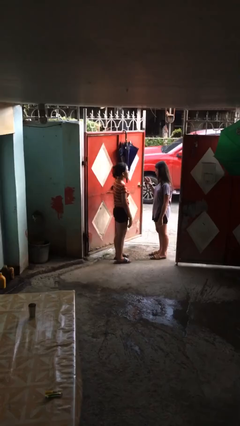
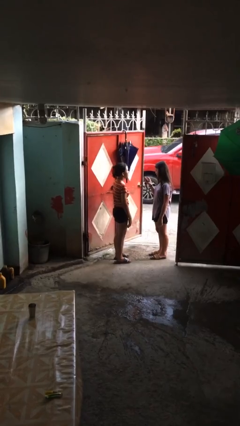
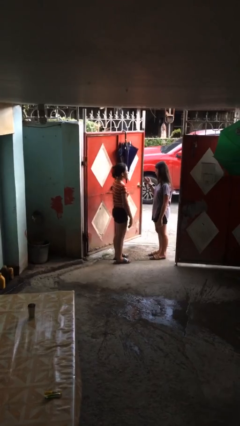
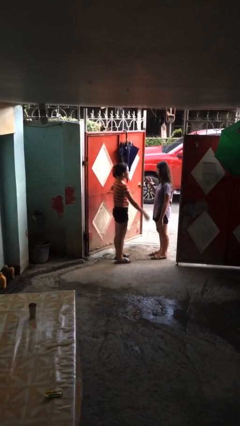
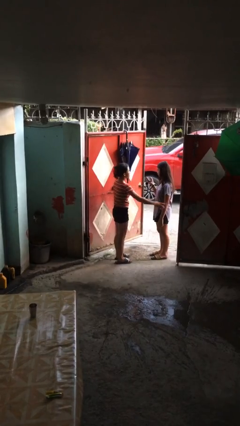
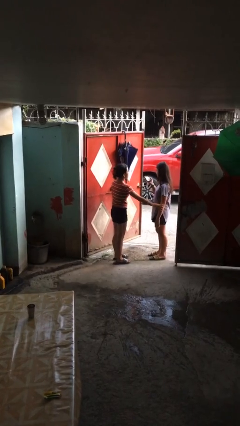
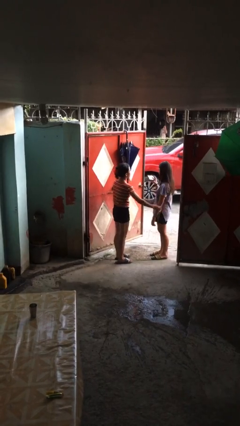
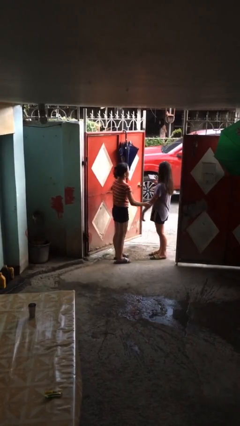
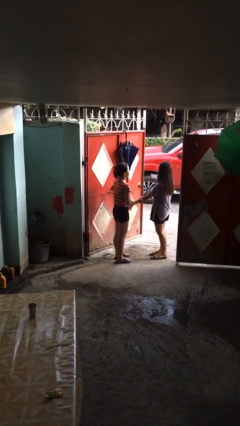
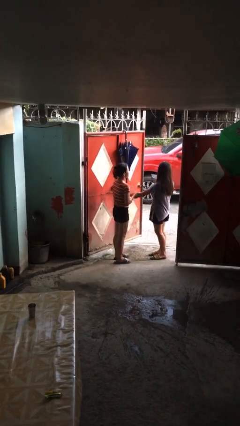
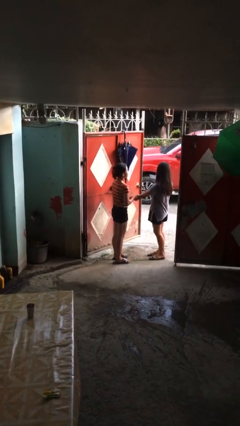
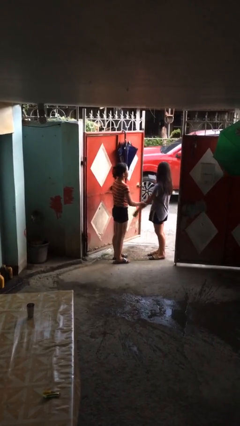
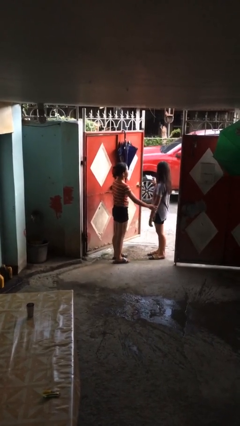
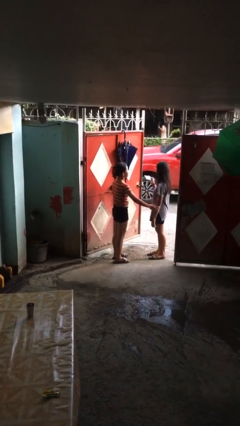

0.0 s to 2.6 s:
person grabs person by forearm

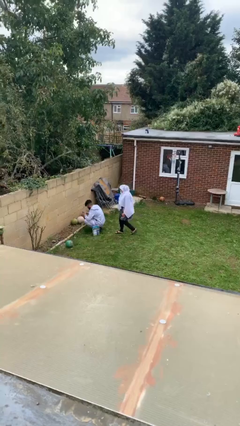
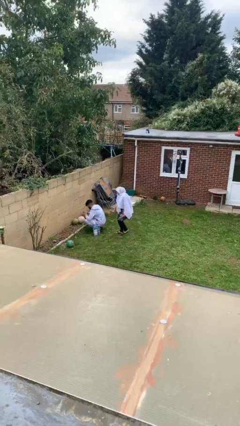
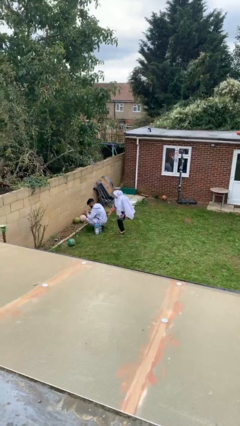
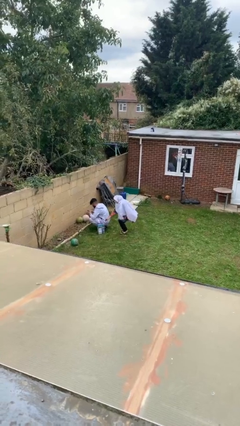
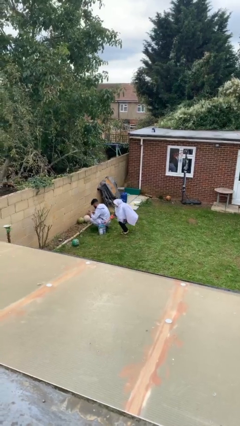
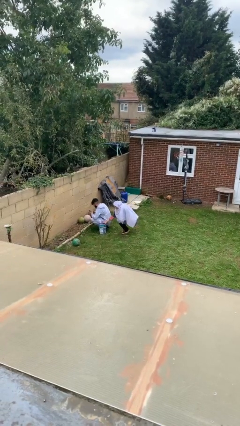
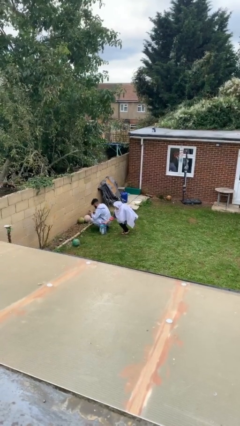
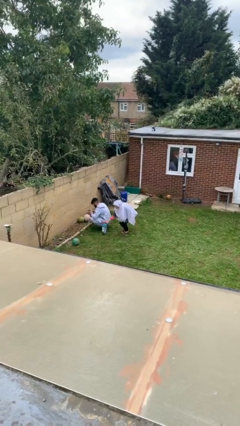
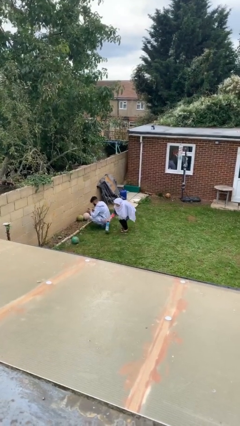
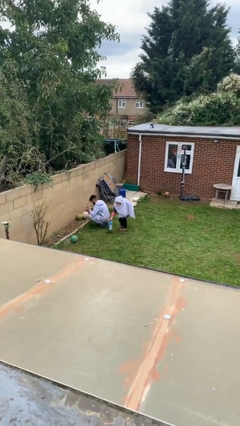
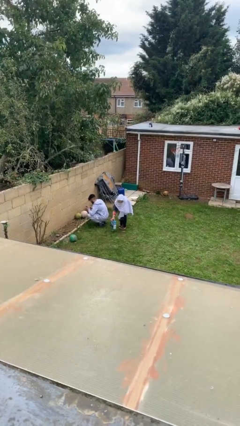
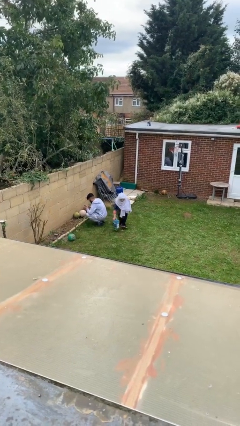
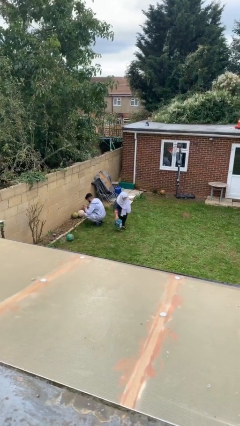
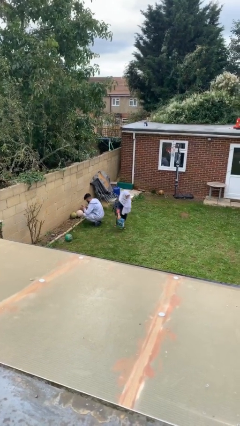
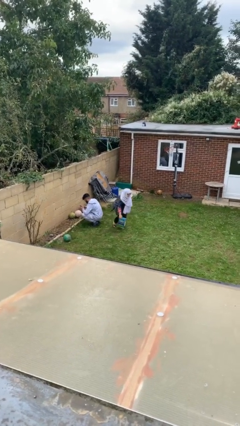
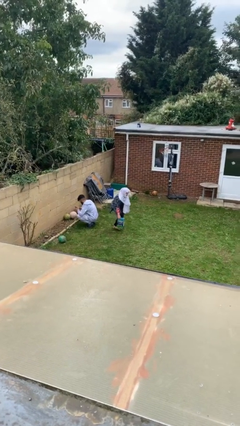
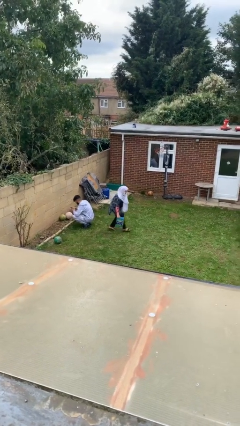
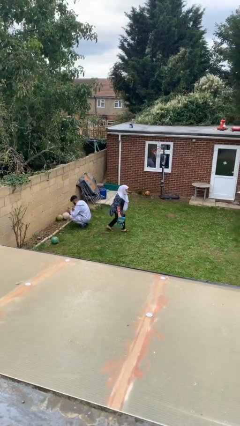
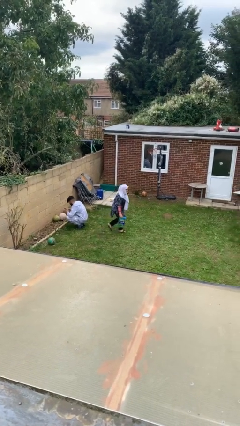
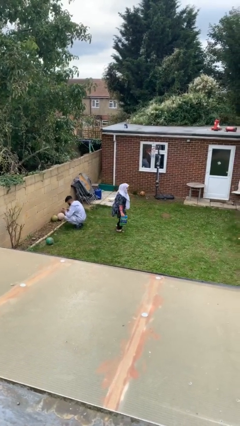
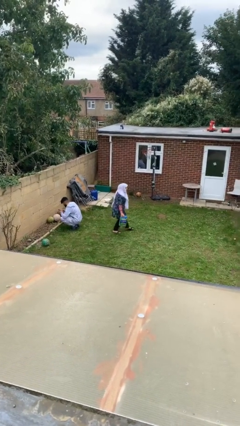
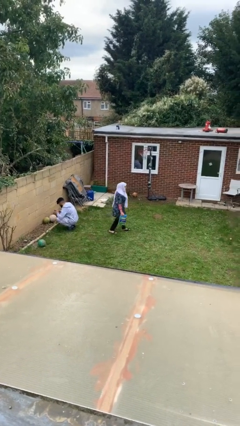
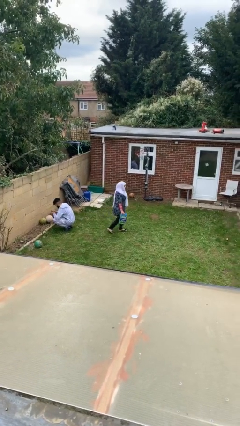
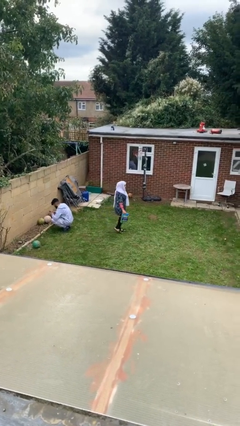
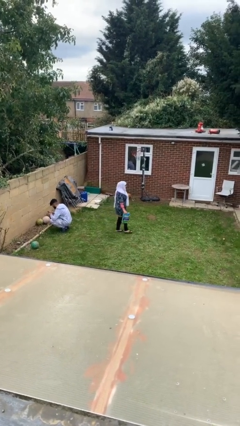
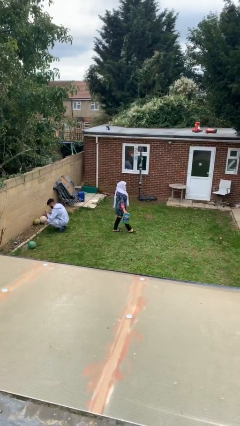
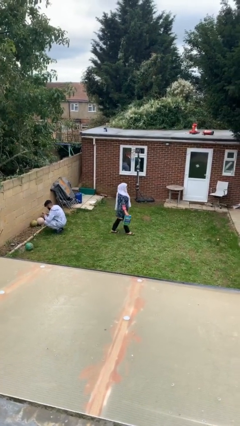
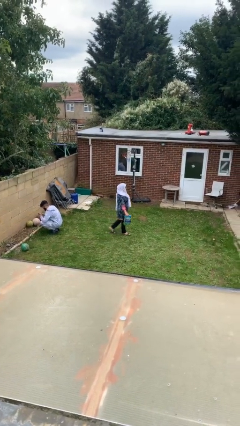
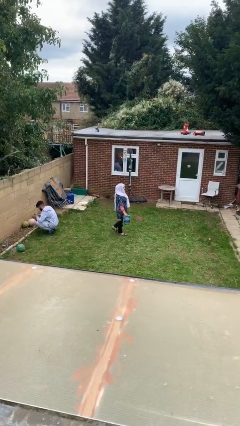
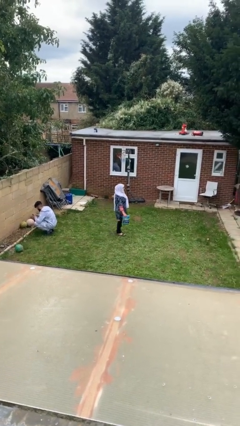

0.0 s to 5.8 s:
person steals object from person

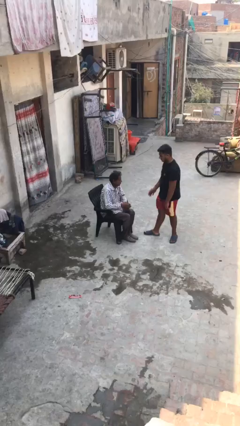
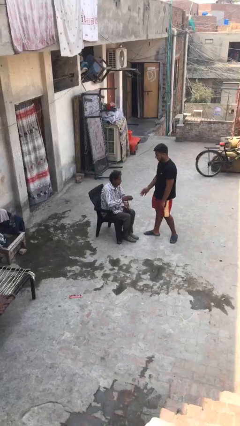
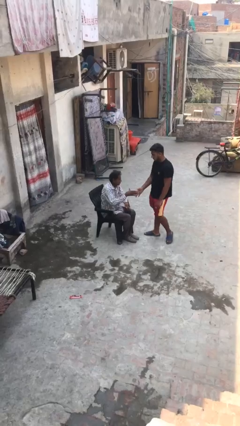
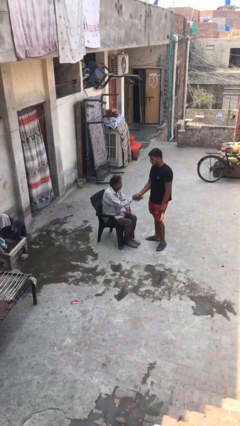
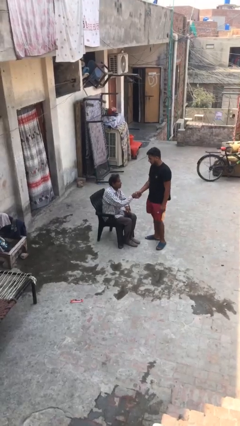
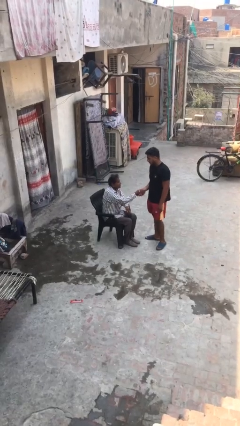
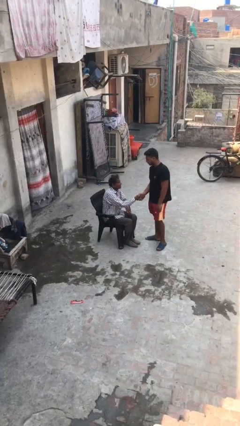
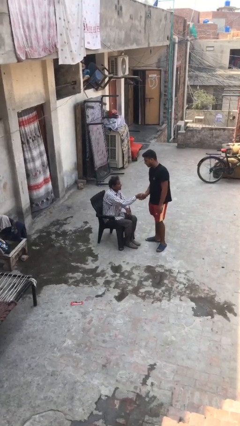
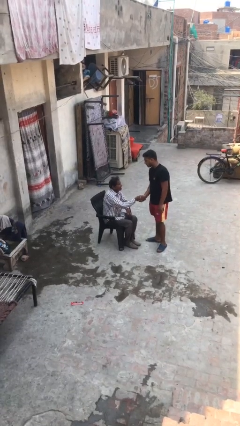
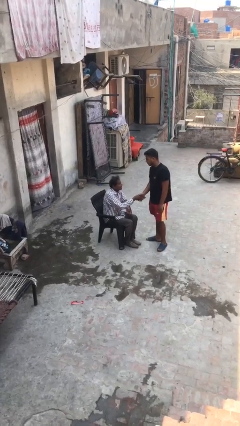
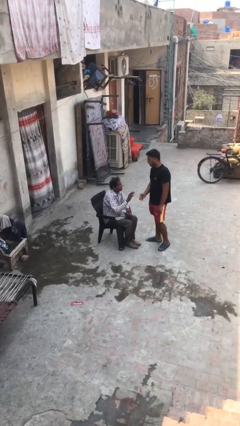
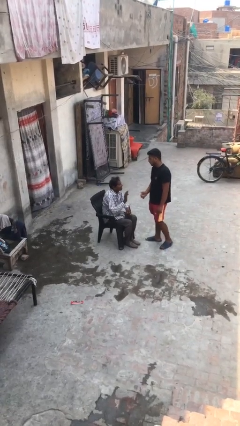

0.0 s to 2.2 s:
person shakes hand

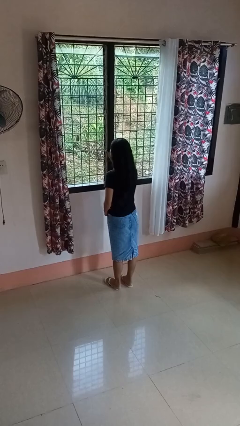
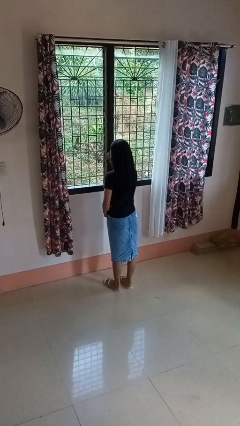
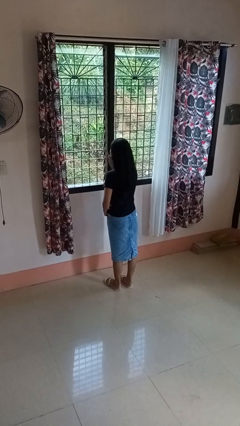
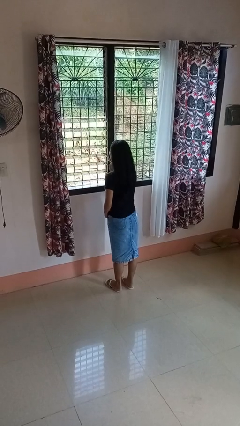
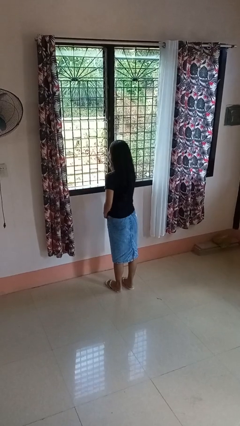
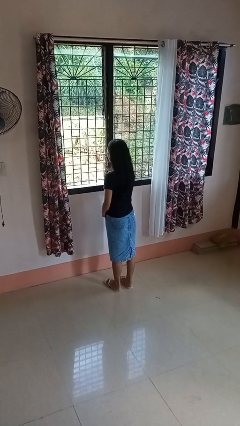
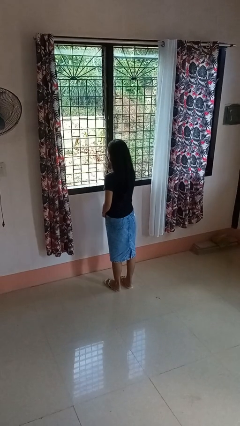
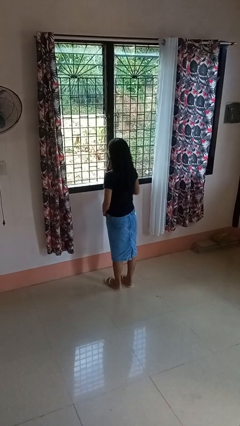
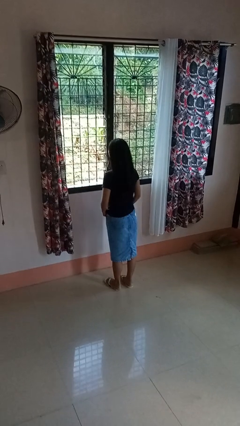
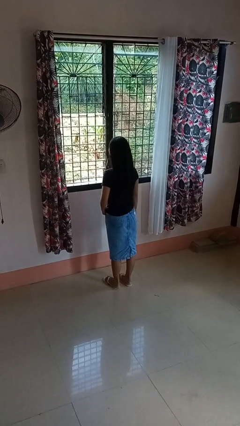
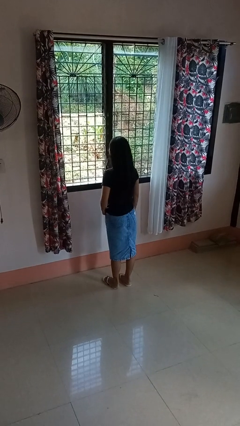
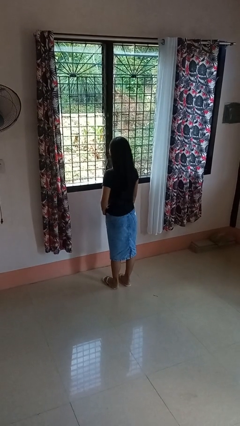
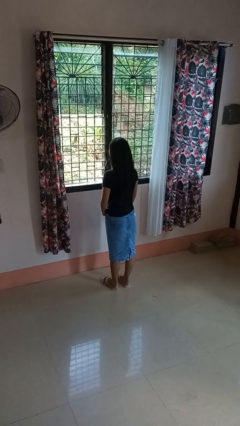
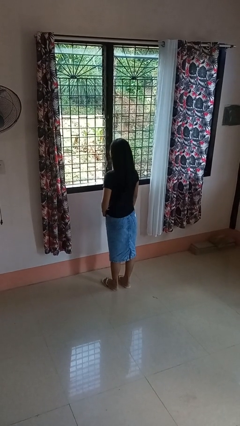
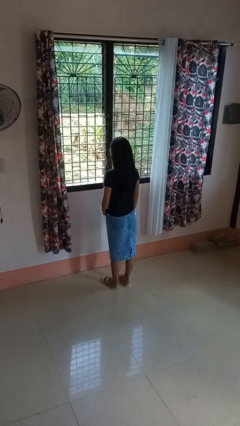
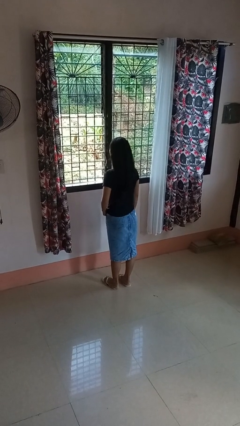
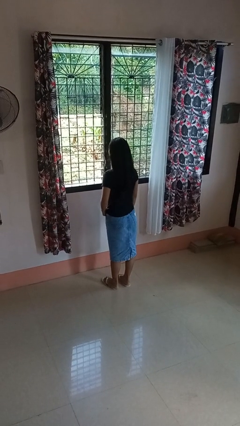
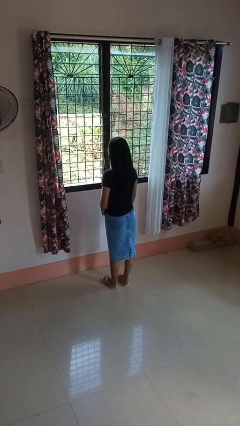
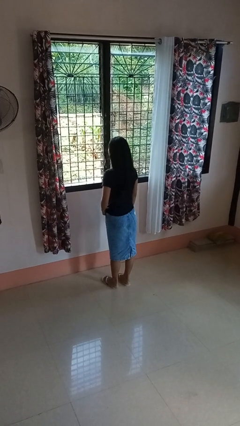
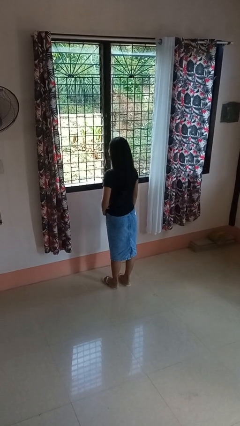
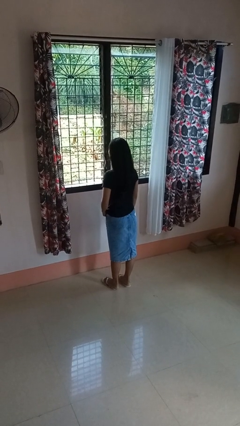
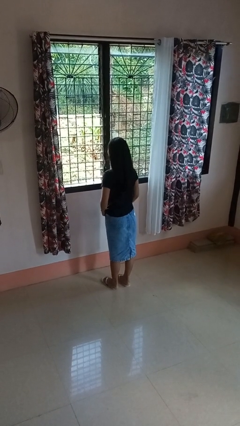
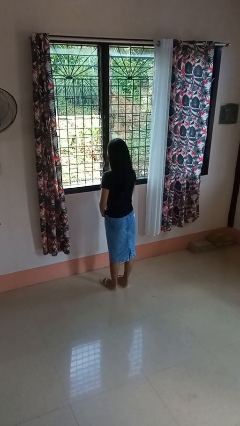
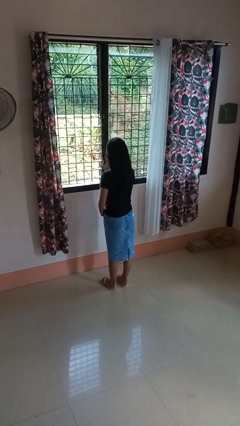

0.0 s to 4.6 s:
person opens home window

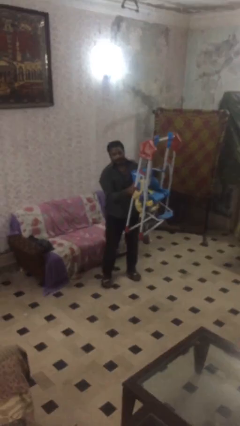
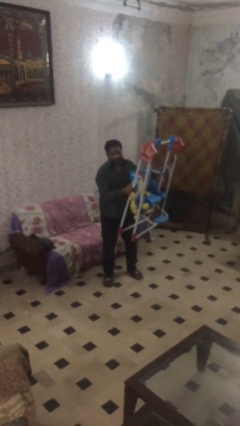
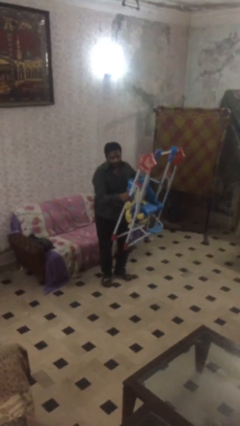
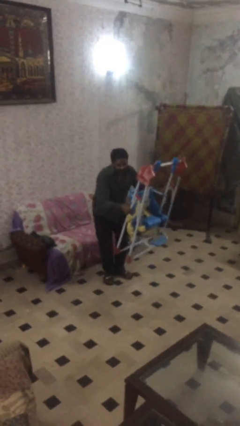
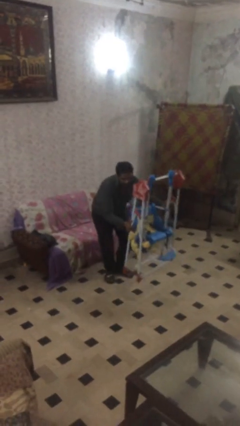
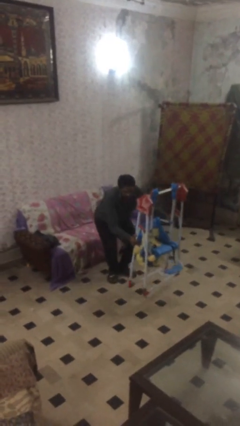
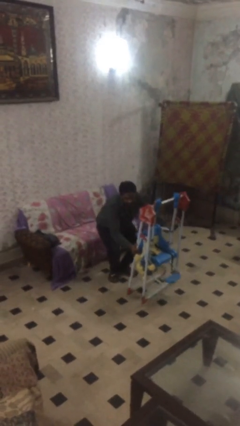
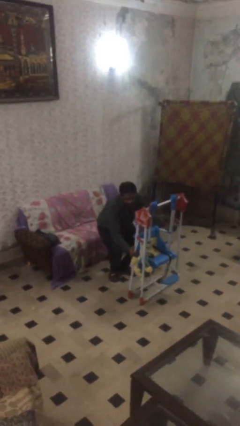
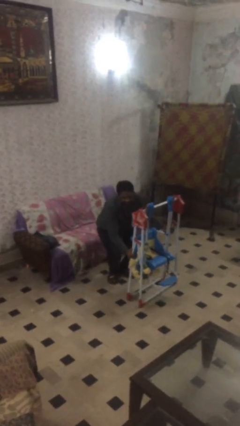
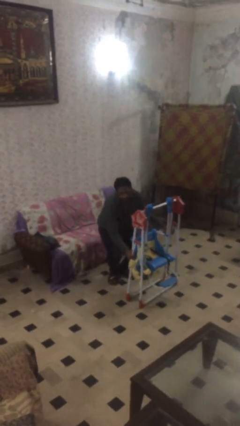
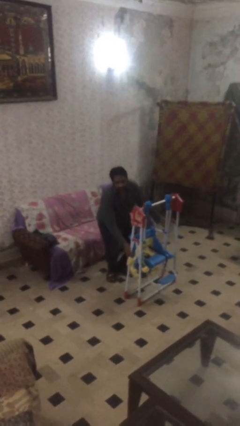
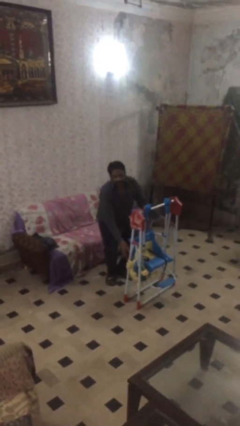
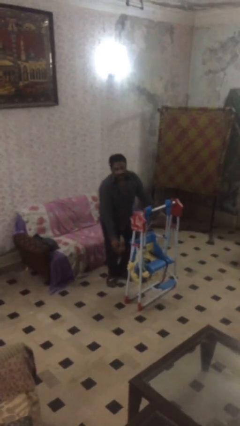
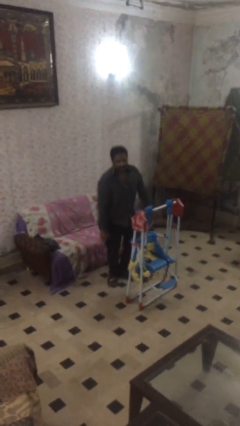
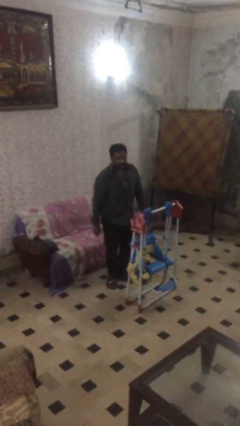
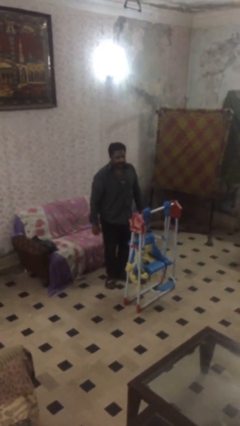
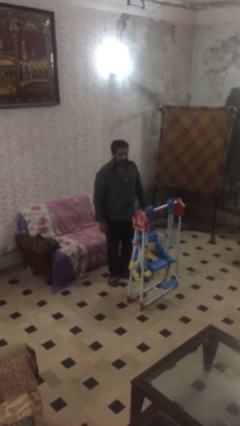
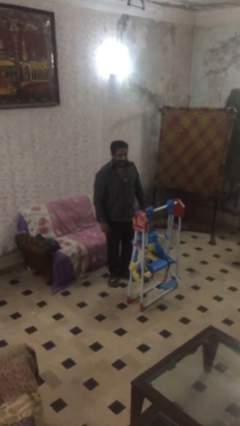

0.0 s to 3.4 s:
person puts down object on floor
